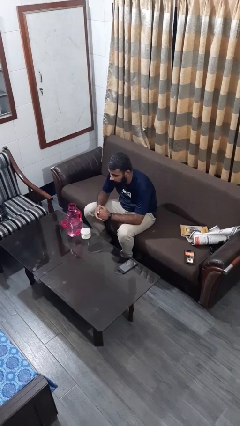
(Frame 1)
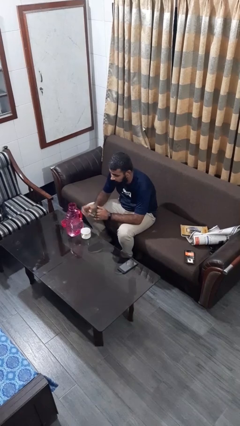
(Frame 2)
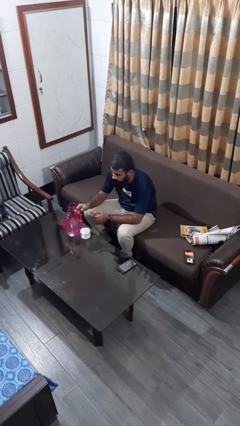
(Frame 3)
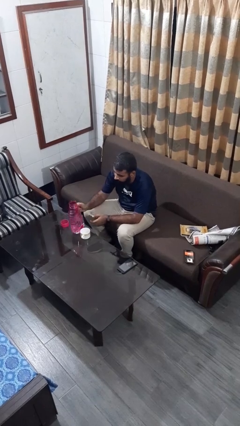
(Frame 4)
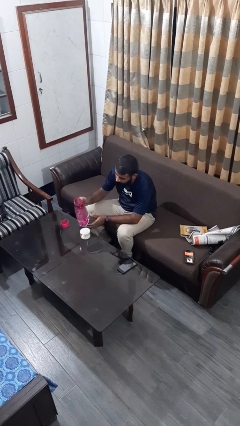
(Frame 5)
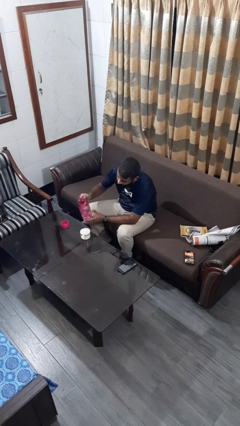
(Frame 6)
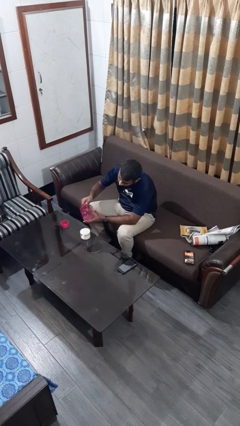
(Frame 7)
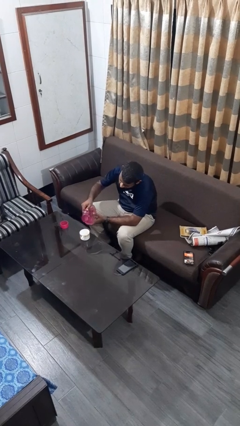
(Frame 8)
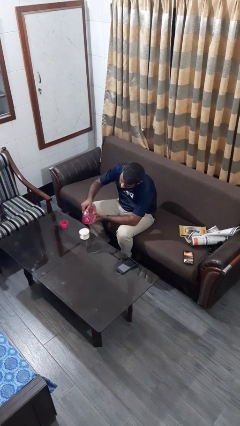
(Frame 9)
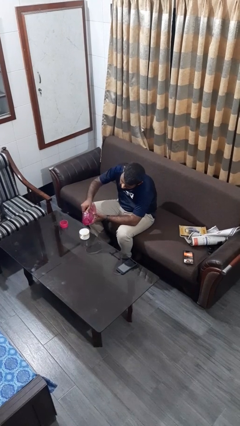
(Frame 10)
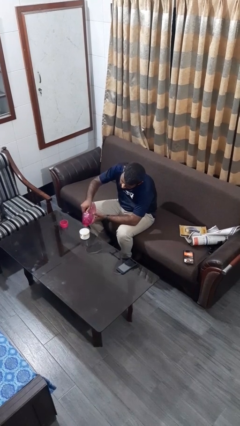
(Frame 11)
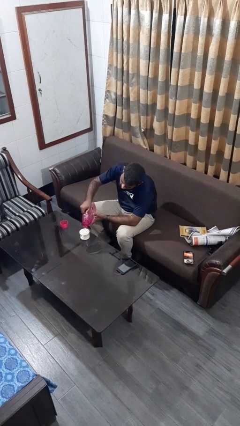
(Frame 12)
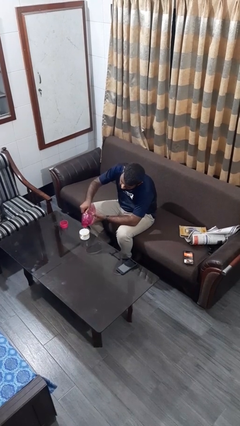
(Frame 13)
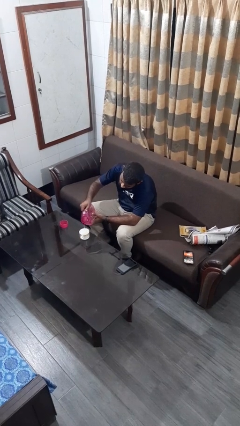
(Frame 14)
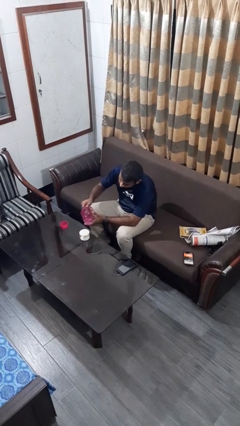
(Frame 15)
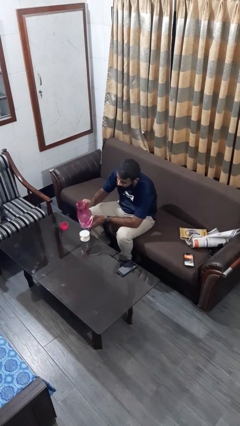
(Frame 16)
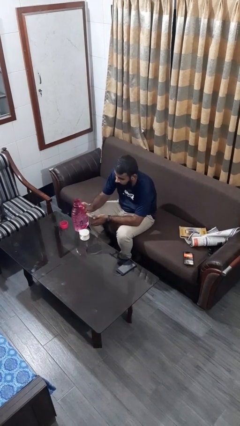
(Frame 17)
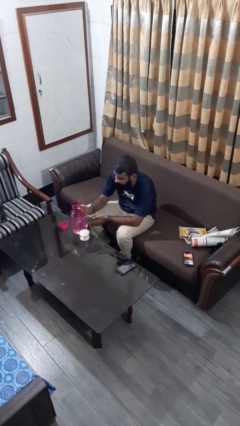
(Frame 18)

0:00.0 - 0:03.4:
person pours liquid into cup

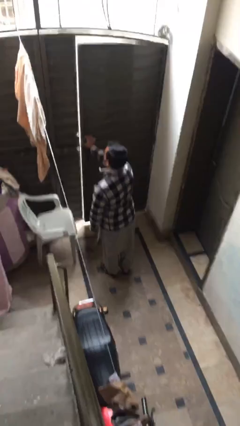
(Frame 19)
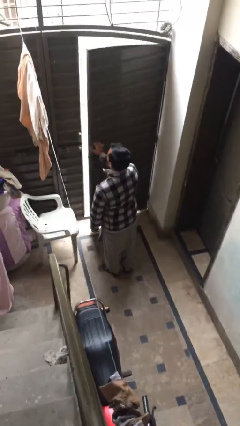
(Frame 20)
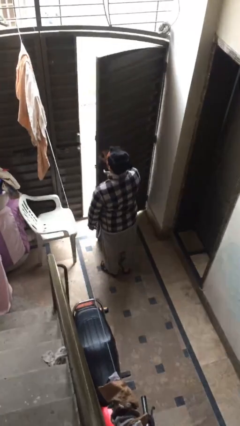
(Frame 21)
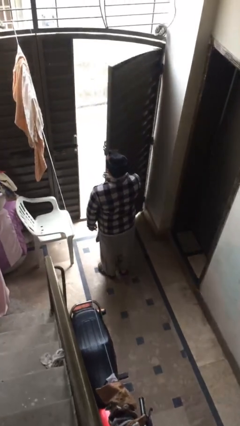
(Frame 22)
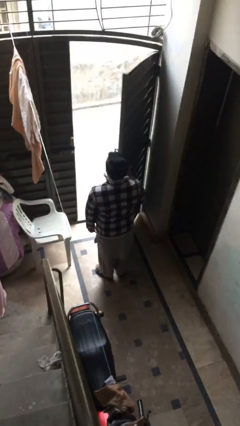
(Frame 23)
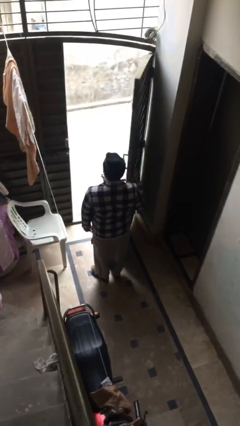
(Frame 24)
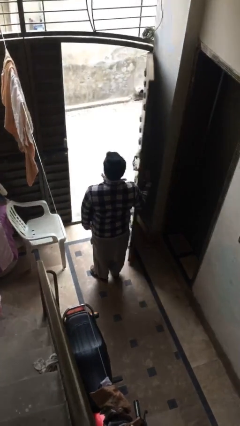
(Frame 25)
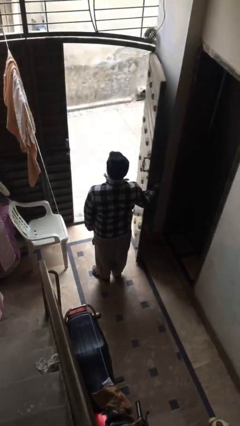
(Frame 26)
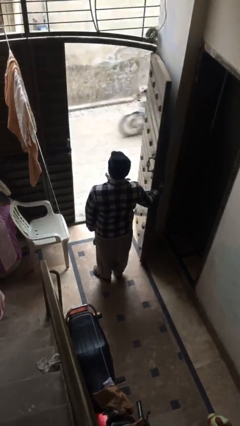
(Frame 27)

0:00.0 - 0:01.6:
person opens facility door

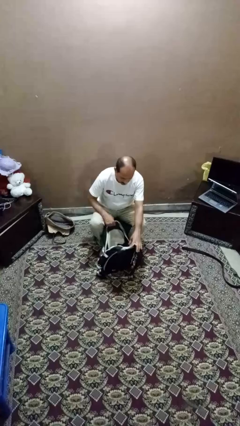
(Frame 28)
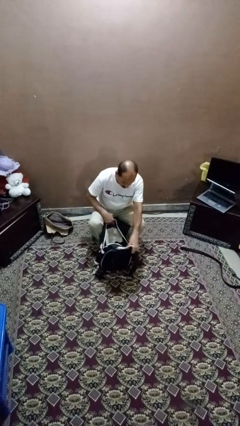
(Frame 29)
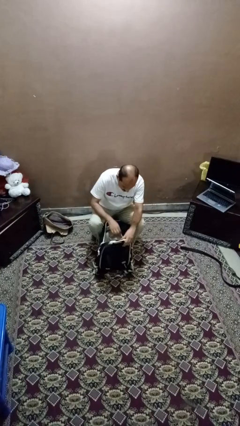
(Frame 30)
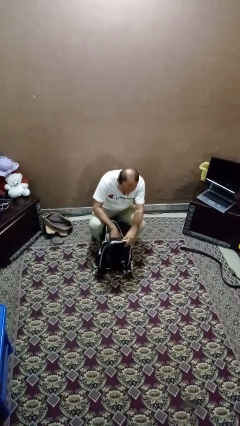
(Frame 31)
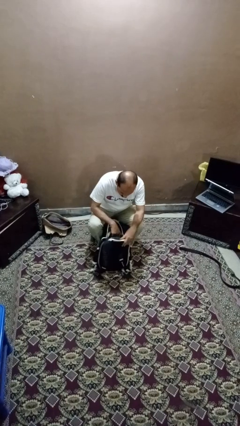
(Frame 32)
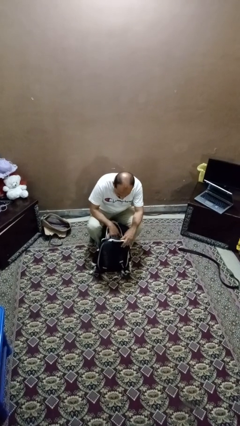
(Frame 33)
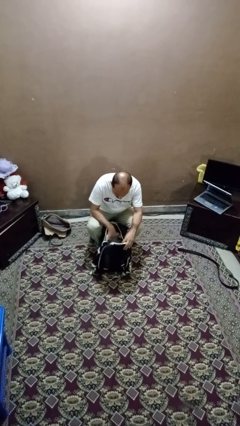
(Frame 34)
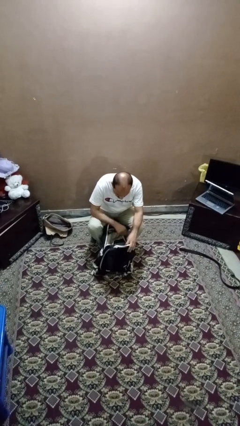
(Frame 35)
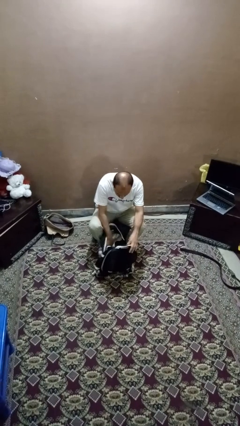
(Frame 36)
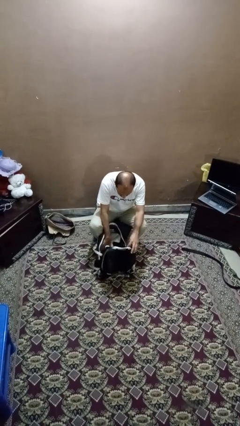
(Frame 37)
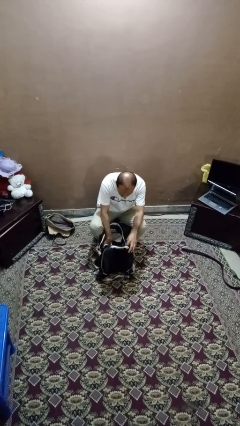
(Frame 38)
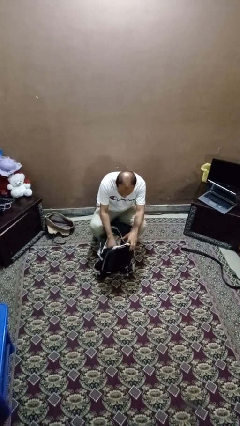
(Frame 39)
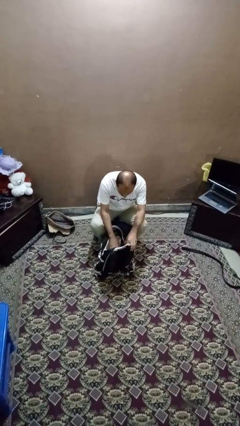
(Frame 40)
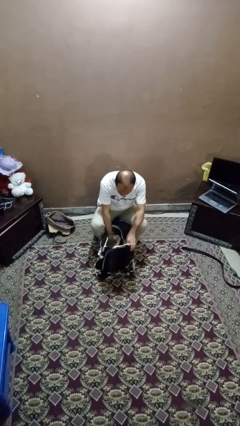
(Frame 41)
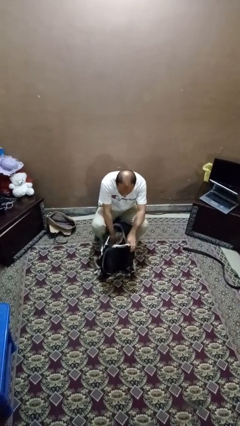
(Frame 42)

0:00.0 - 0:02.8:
person searches in backpack

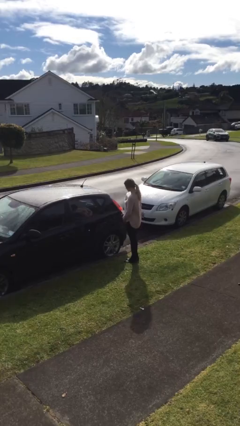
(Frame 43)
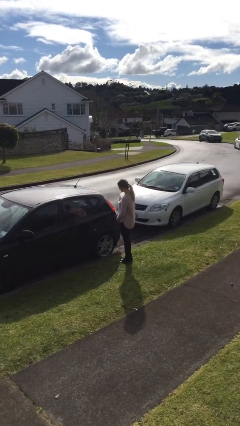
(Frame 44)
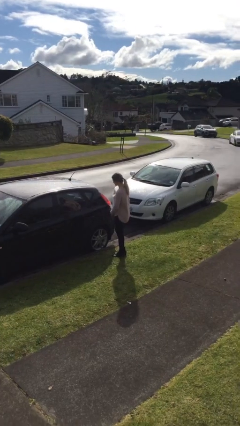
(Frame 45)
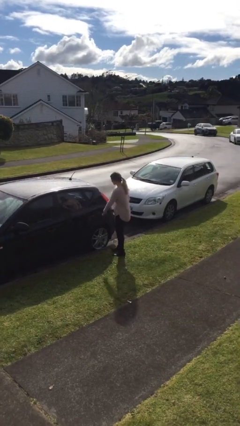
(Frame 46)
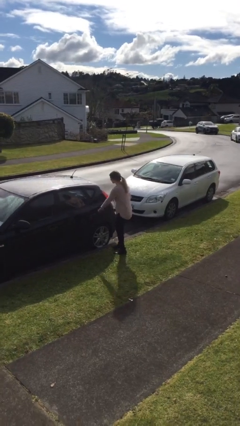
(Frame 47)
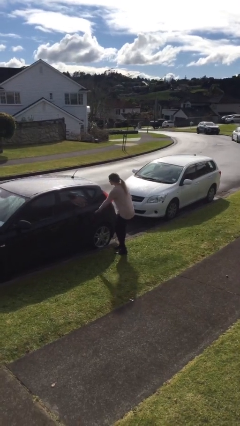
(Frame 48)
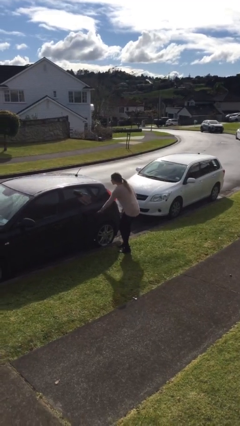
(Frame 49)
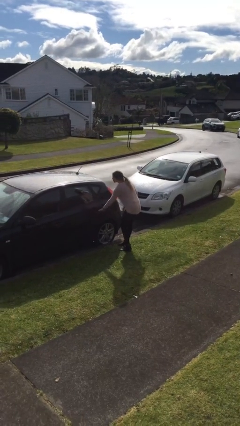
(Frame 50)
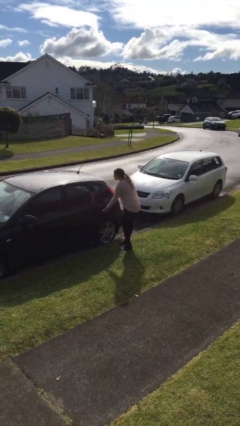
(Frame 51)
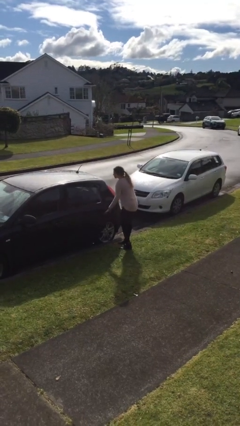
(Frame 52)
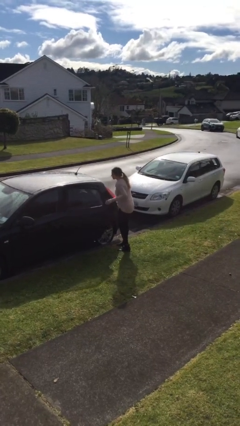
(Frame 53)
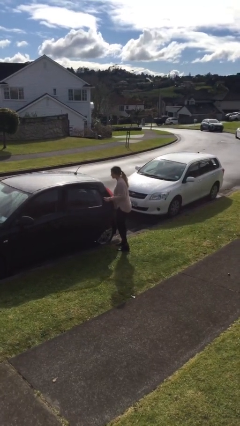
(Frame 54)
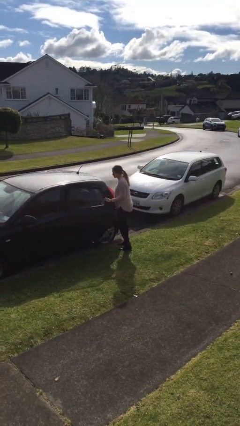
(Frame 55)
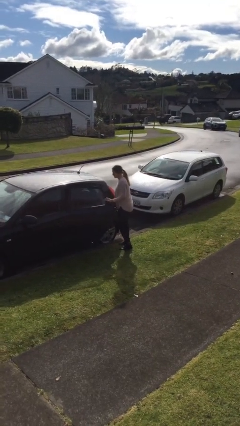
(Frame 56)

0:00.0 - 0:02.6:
person opens car door

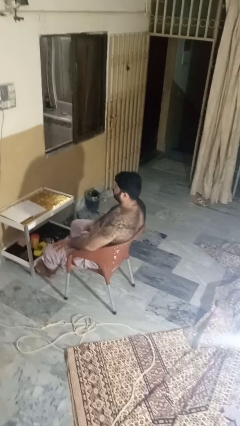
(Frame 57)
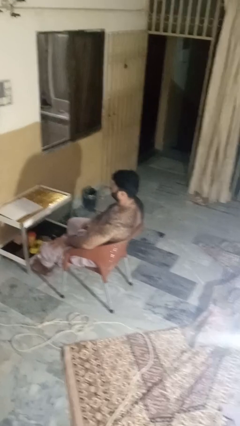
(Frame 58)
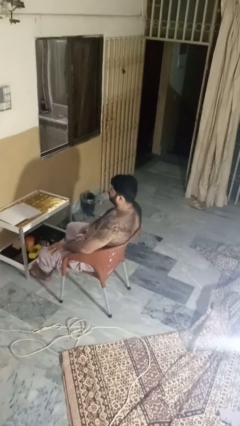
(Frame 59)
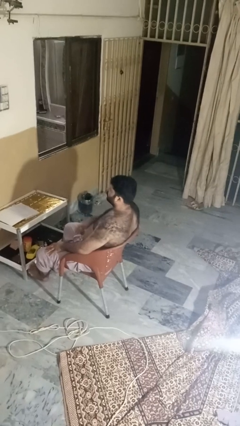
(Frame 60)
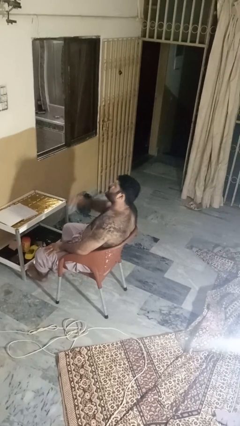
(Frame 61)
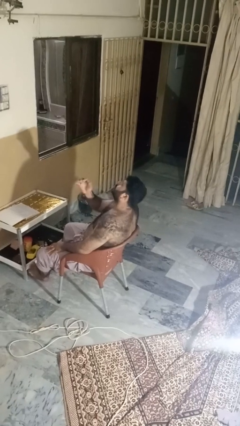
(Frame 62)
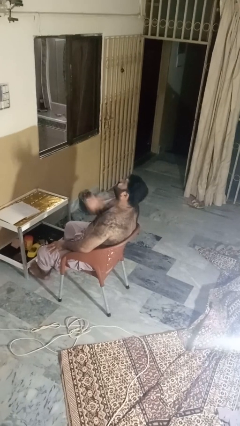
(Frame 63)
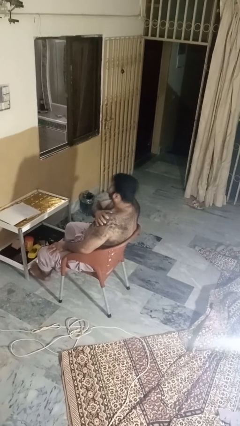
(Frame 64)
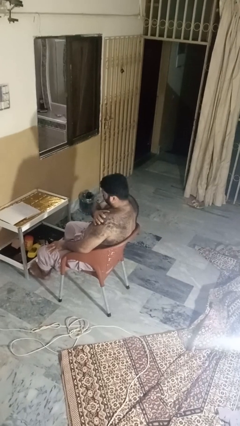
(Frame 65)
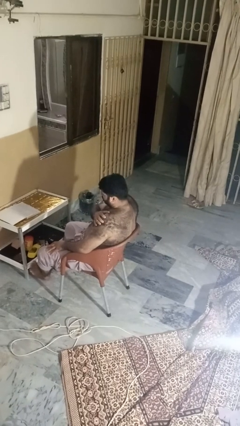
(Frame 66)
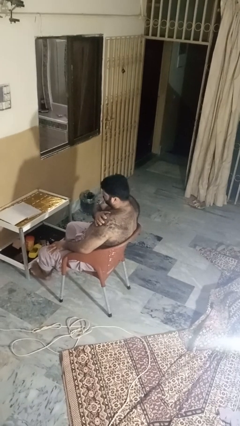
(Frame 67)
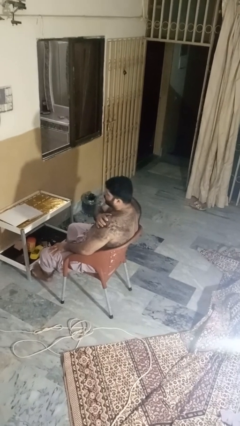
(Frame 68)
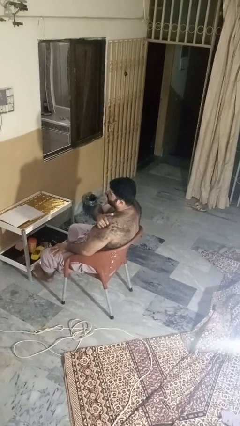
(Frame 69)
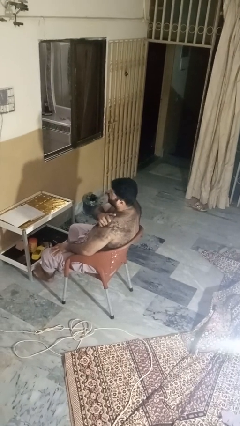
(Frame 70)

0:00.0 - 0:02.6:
person shrugs

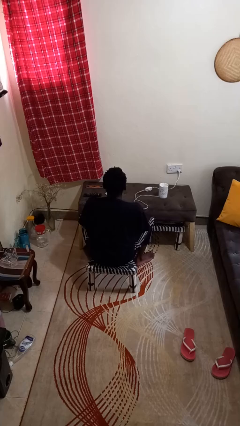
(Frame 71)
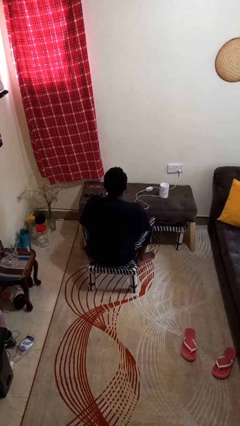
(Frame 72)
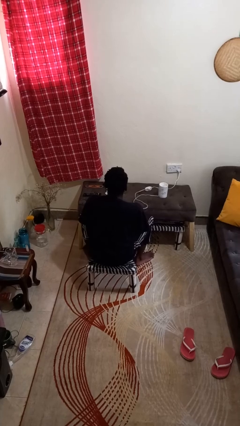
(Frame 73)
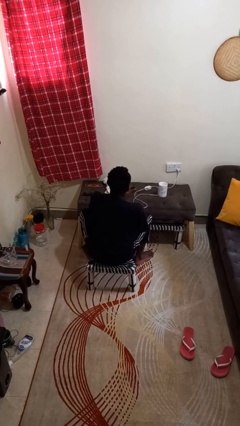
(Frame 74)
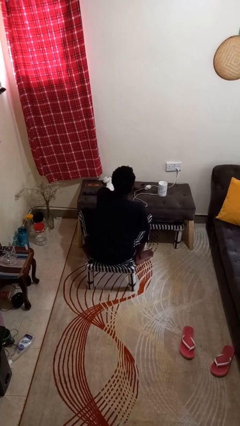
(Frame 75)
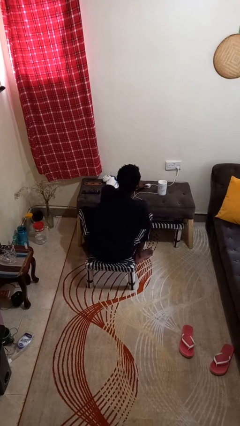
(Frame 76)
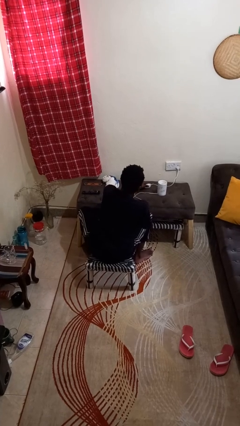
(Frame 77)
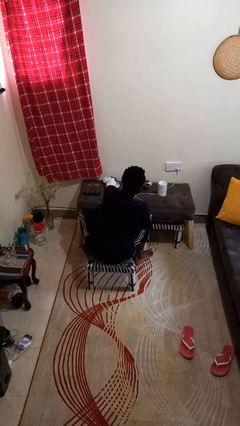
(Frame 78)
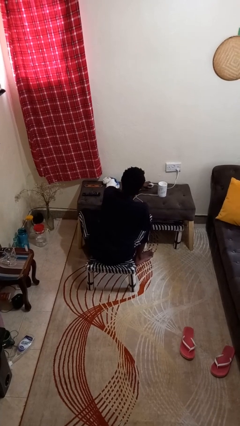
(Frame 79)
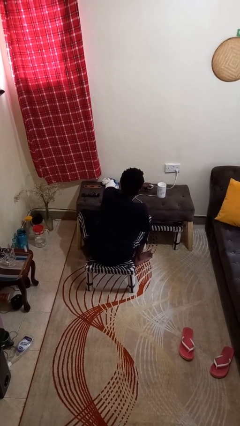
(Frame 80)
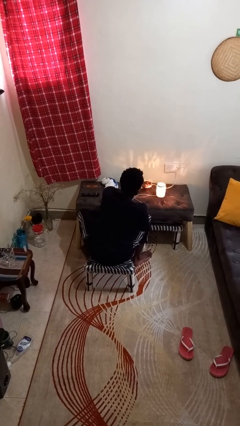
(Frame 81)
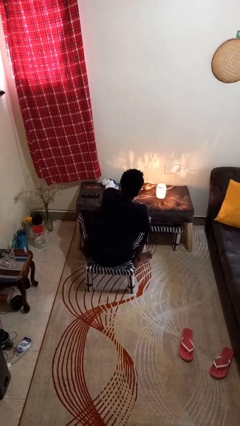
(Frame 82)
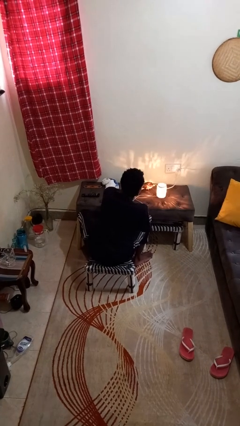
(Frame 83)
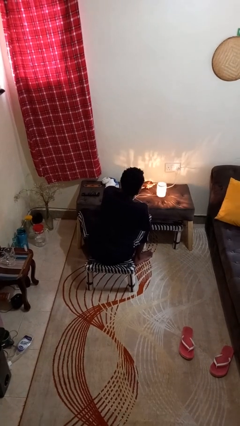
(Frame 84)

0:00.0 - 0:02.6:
person turns on fan

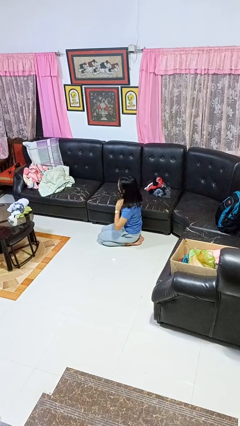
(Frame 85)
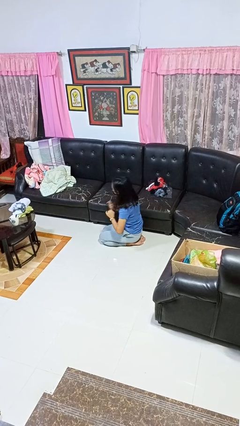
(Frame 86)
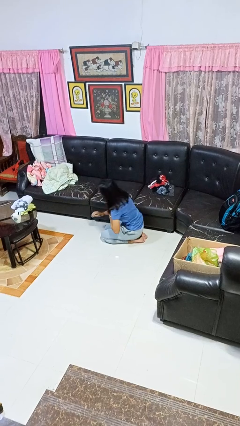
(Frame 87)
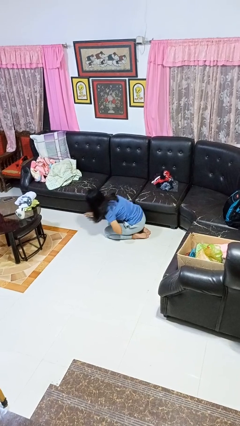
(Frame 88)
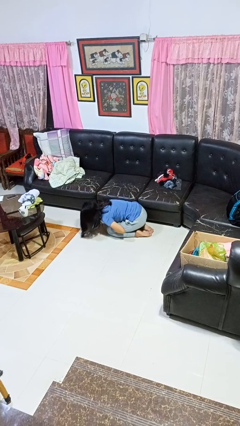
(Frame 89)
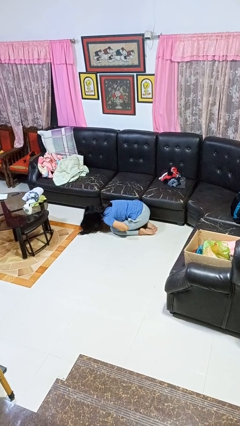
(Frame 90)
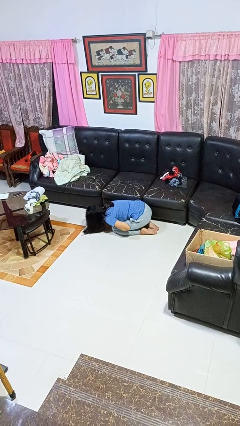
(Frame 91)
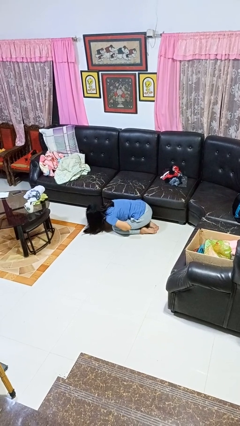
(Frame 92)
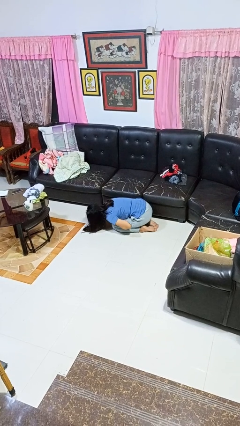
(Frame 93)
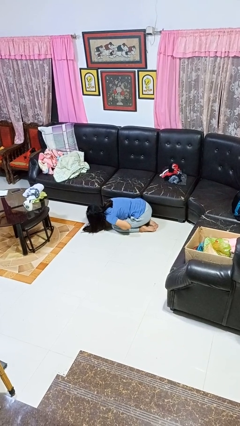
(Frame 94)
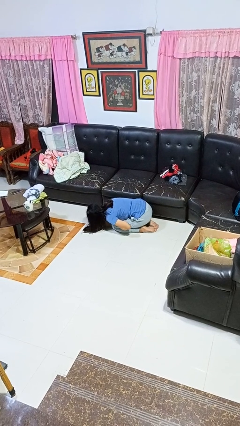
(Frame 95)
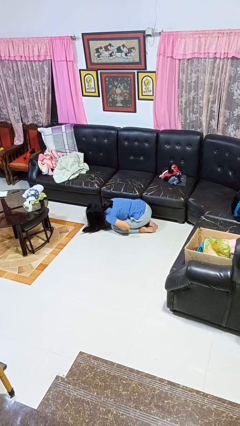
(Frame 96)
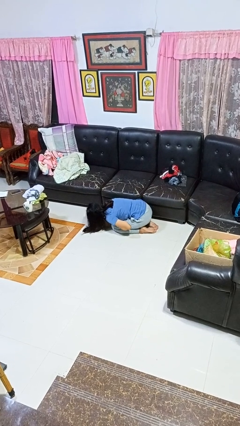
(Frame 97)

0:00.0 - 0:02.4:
person searches under couch
